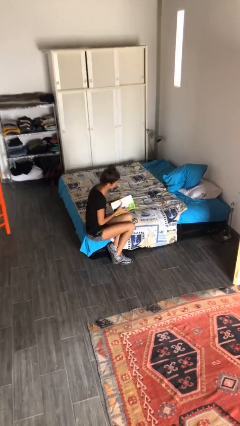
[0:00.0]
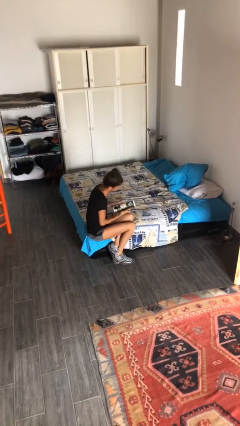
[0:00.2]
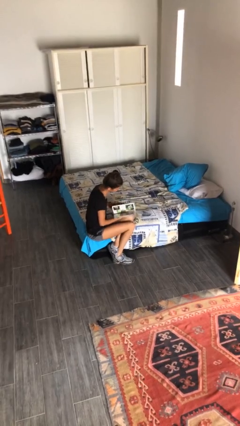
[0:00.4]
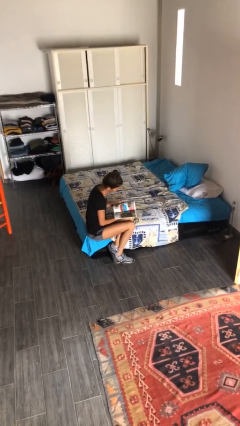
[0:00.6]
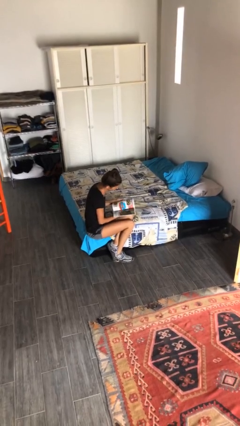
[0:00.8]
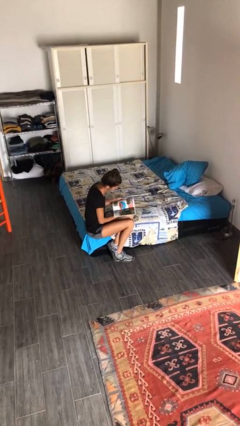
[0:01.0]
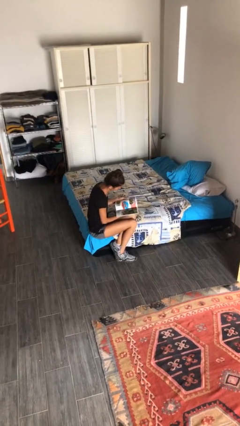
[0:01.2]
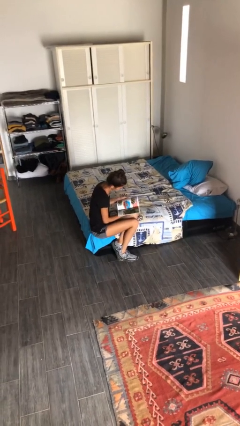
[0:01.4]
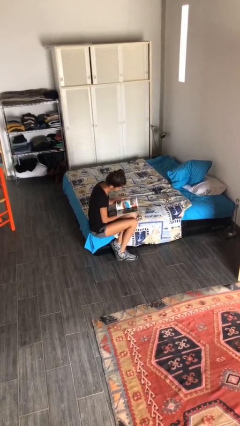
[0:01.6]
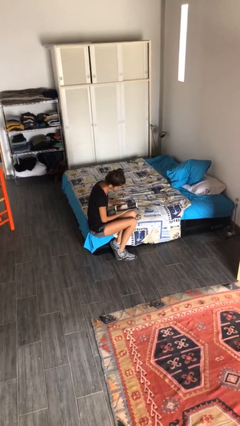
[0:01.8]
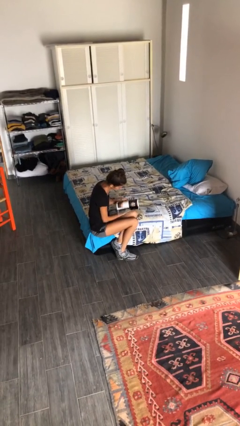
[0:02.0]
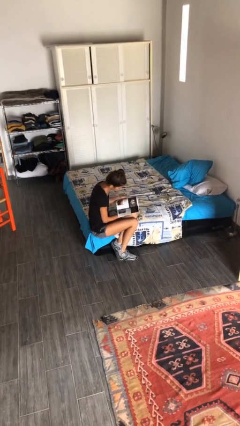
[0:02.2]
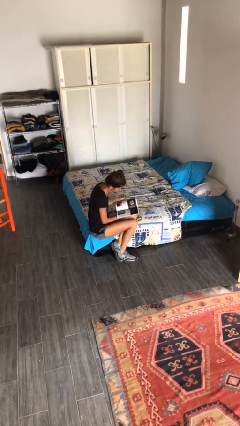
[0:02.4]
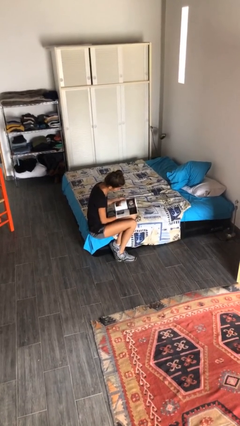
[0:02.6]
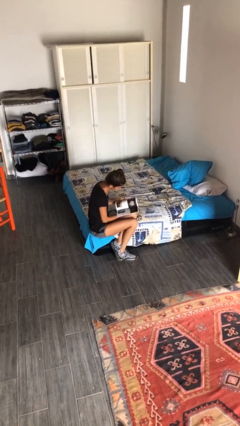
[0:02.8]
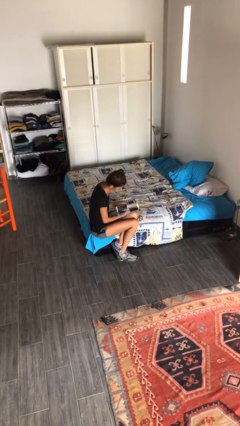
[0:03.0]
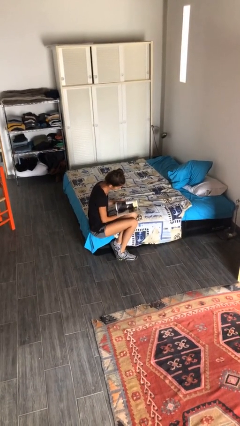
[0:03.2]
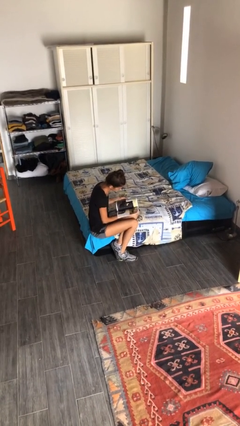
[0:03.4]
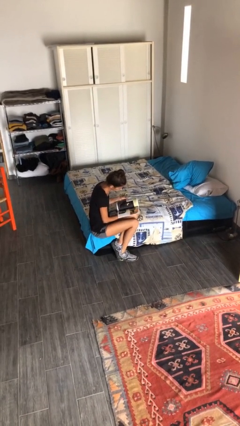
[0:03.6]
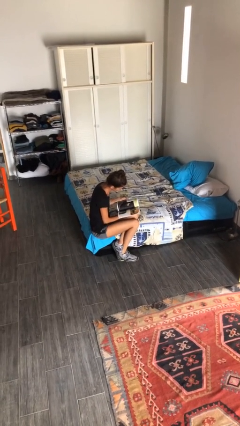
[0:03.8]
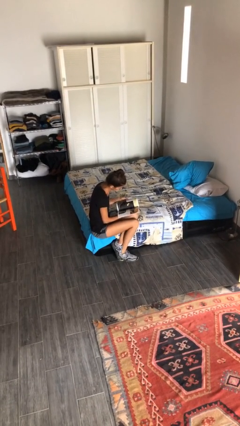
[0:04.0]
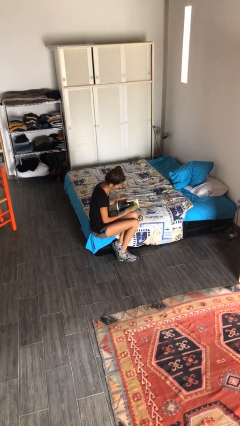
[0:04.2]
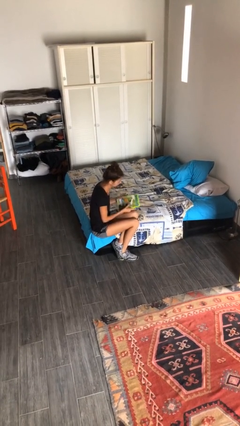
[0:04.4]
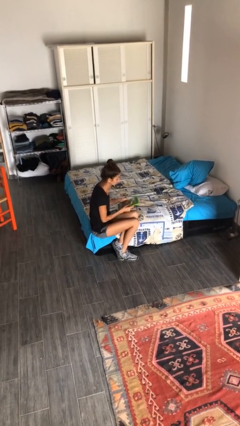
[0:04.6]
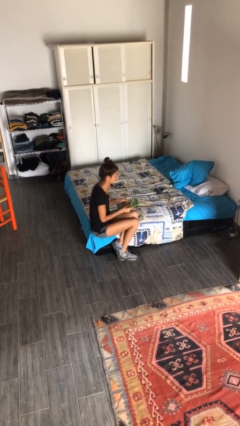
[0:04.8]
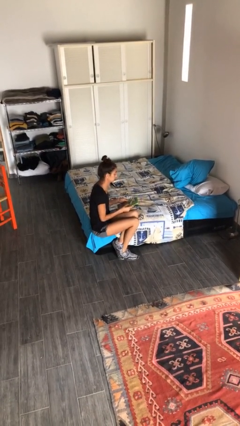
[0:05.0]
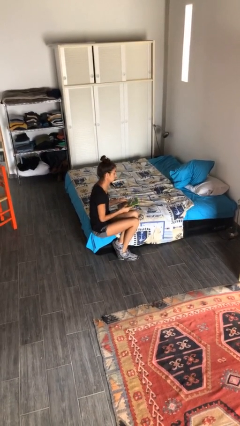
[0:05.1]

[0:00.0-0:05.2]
person reads magazine

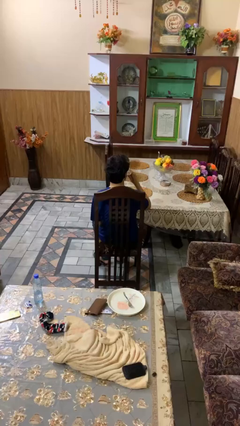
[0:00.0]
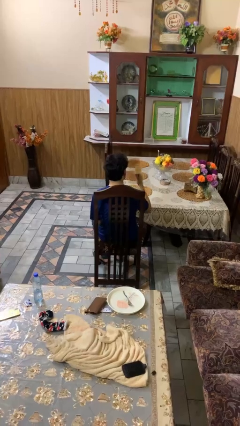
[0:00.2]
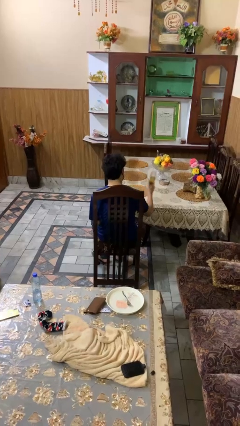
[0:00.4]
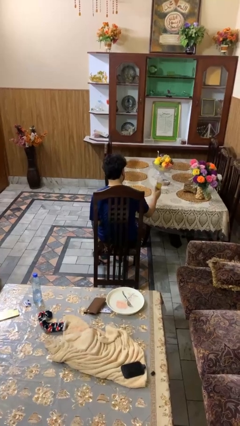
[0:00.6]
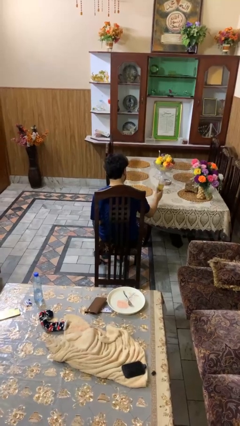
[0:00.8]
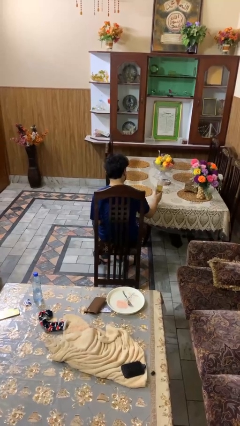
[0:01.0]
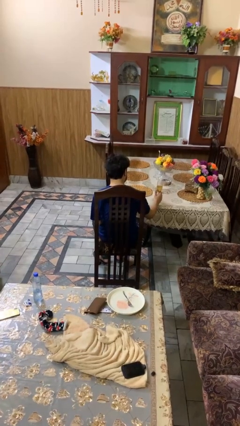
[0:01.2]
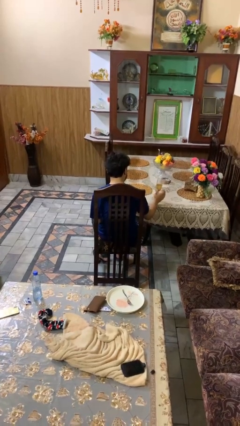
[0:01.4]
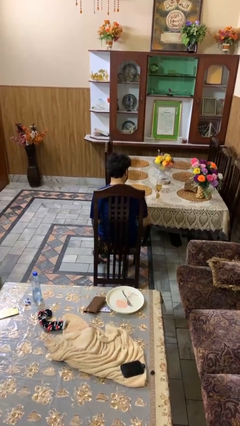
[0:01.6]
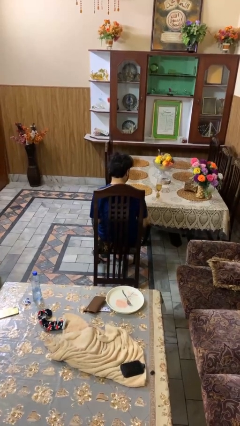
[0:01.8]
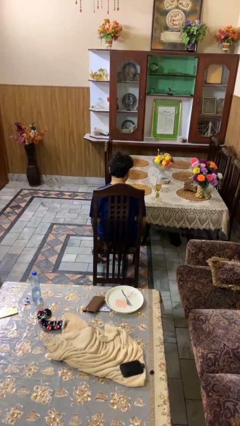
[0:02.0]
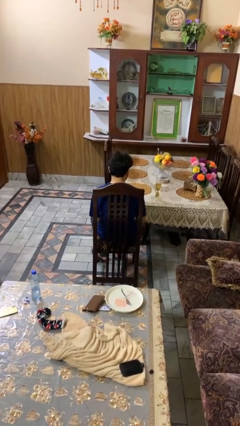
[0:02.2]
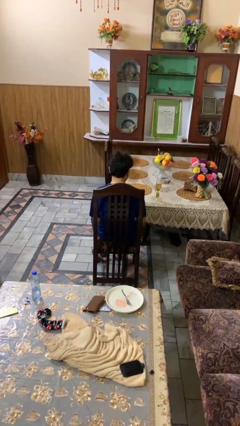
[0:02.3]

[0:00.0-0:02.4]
person puts down object on table

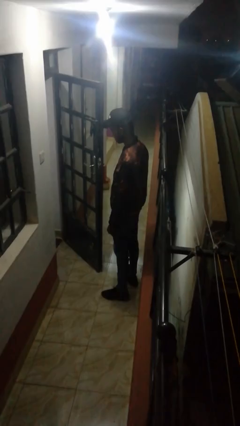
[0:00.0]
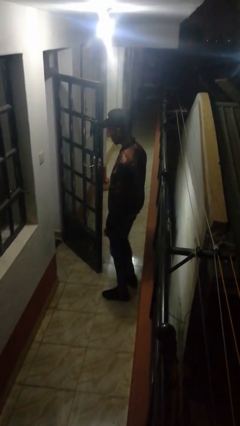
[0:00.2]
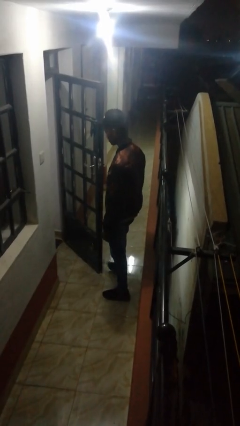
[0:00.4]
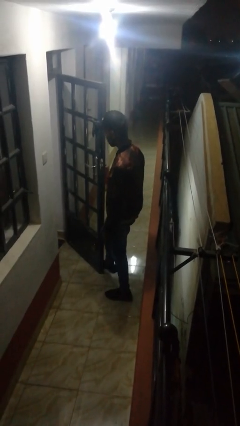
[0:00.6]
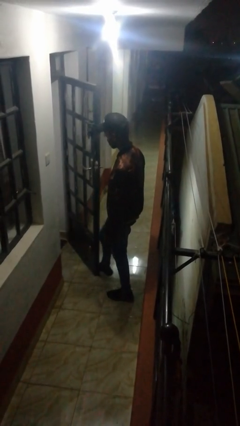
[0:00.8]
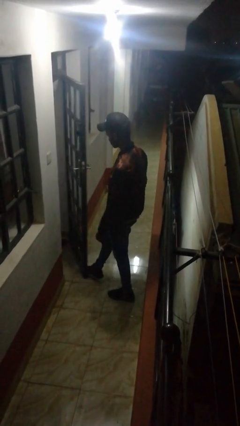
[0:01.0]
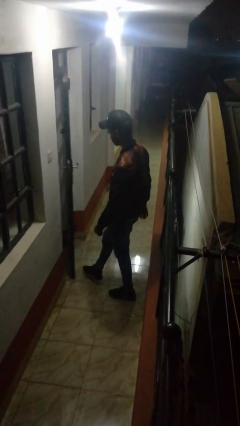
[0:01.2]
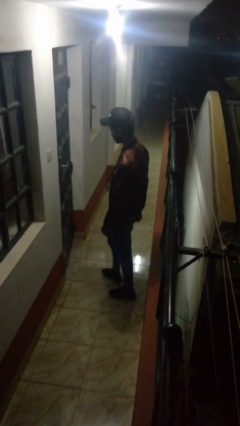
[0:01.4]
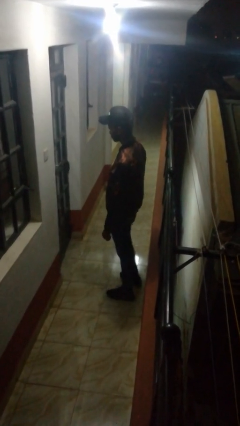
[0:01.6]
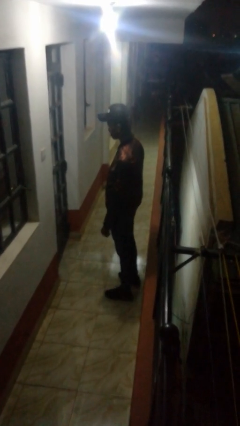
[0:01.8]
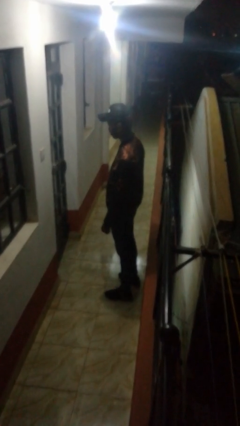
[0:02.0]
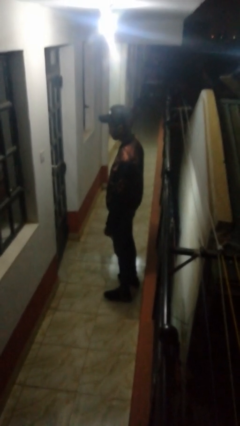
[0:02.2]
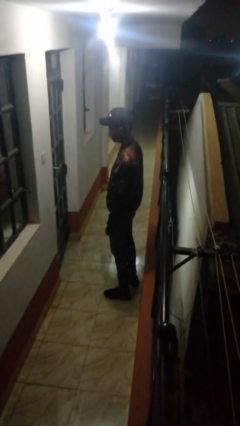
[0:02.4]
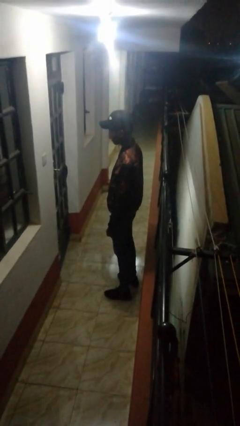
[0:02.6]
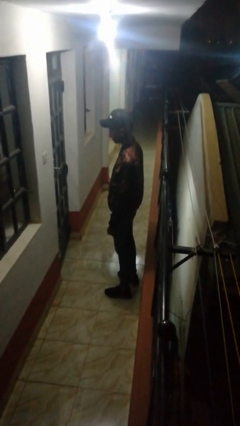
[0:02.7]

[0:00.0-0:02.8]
person closes door with foot

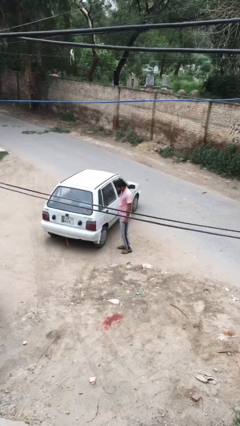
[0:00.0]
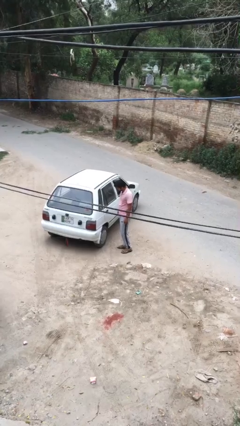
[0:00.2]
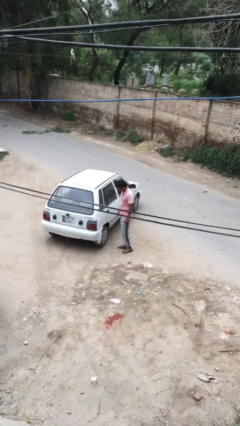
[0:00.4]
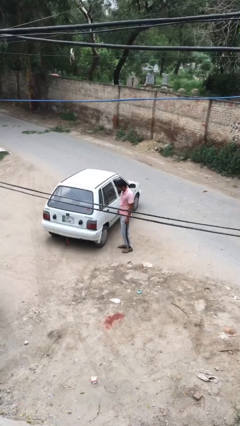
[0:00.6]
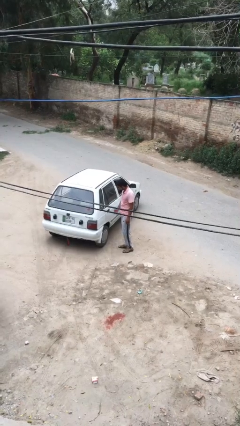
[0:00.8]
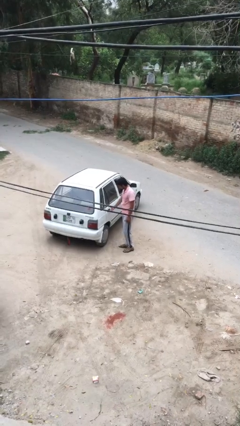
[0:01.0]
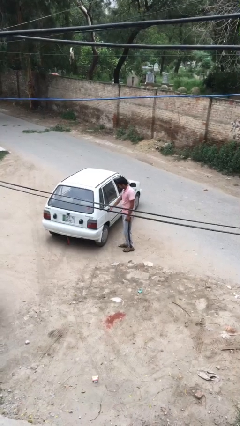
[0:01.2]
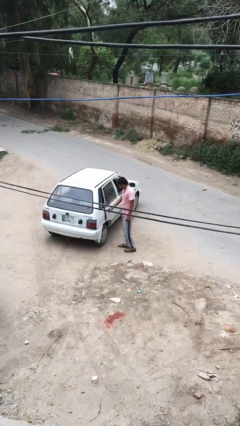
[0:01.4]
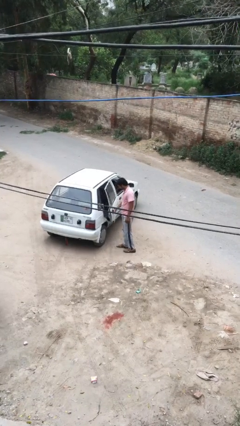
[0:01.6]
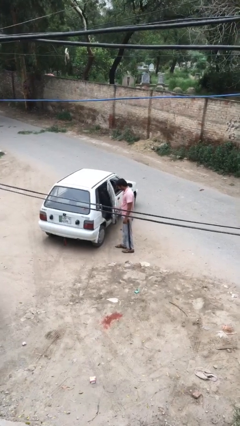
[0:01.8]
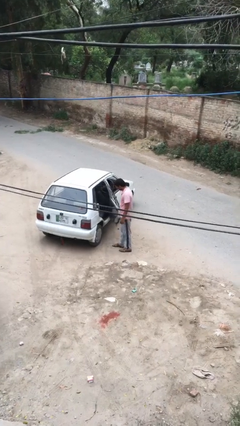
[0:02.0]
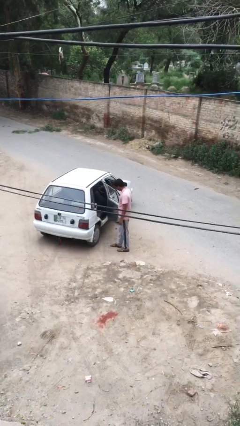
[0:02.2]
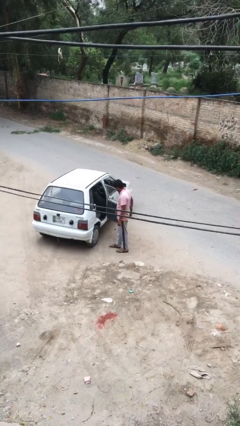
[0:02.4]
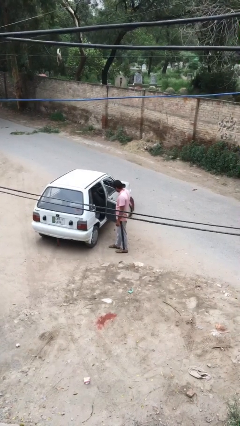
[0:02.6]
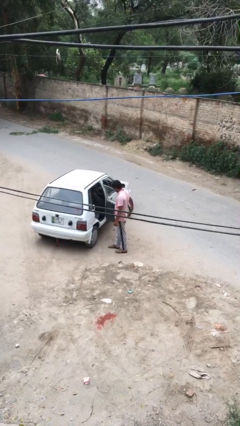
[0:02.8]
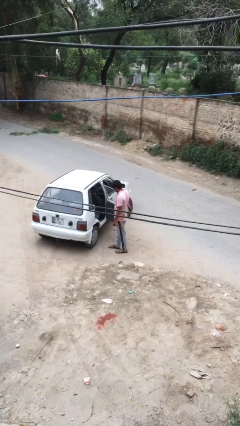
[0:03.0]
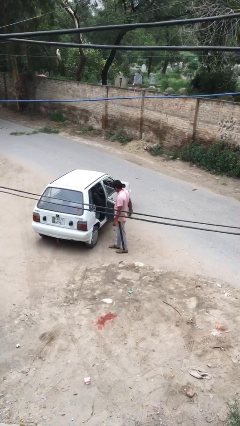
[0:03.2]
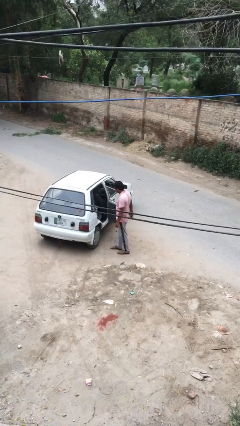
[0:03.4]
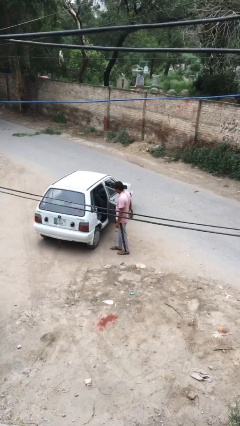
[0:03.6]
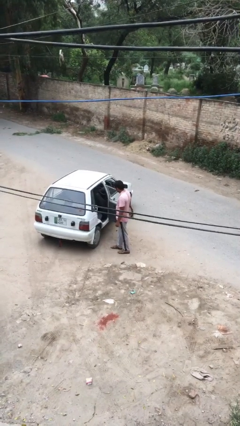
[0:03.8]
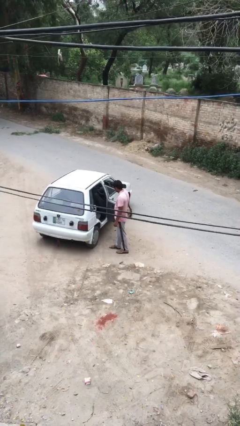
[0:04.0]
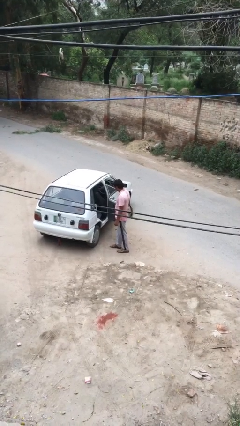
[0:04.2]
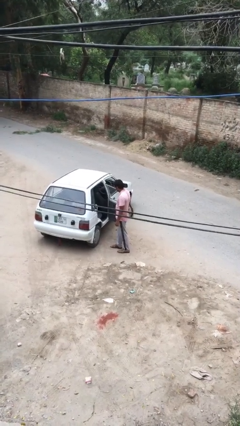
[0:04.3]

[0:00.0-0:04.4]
person opens car door

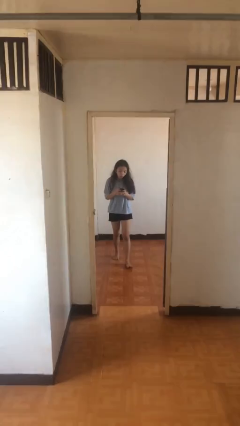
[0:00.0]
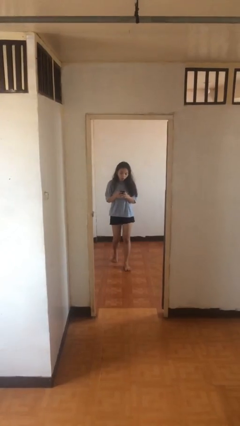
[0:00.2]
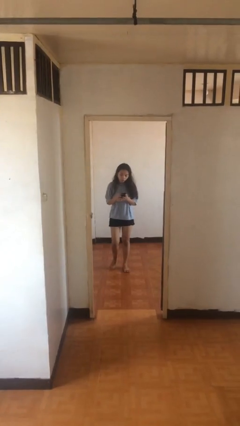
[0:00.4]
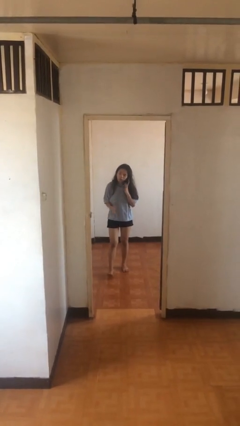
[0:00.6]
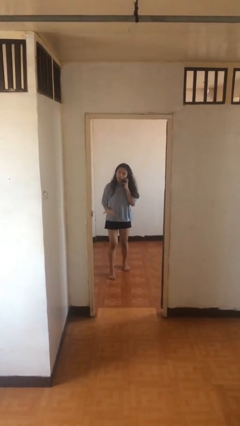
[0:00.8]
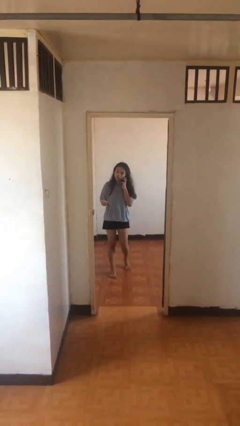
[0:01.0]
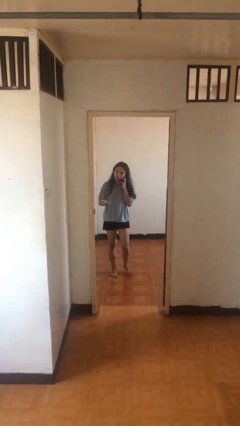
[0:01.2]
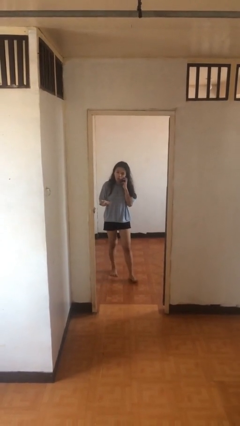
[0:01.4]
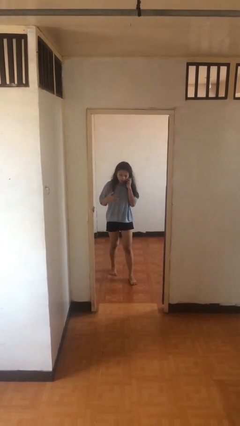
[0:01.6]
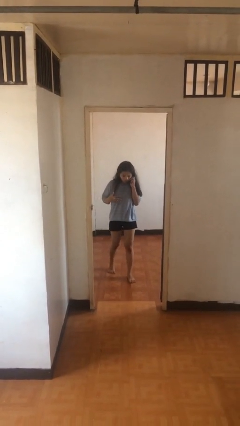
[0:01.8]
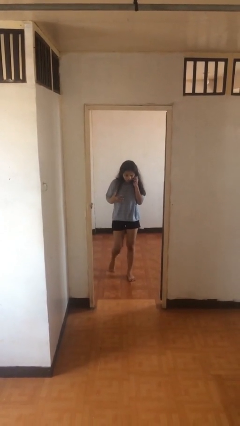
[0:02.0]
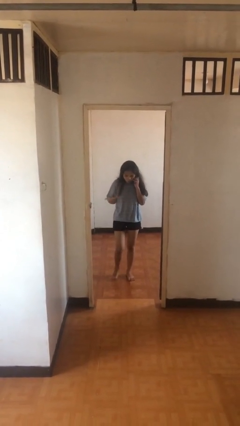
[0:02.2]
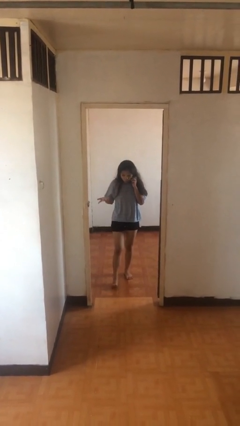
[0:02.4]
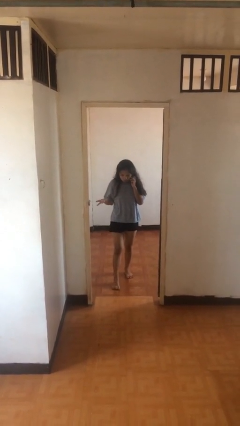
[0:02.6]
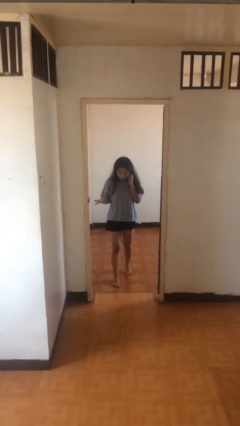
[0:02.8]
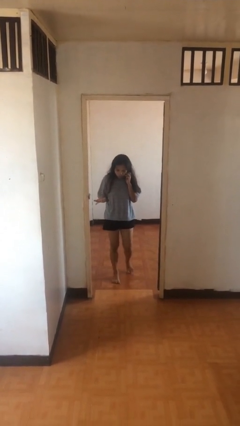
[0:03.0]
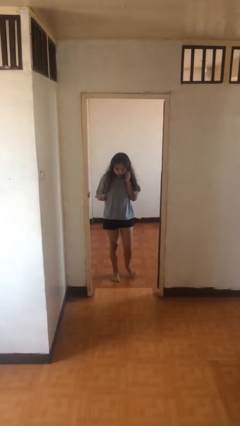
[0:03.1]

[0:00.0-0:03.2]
person talks on phone
